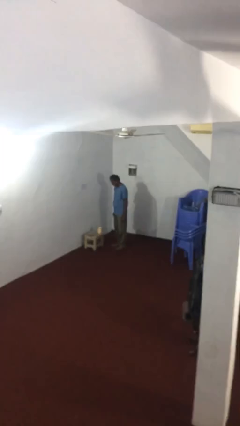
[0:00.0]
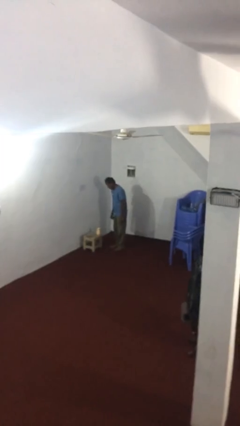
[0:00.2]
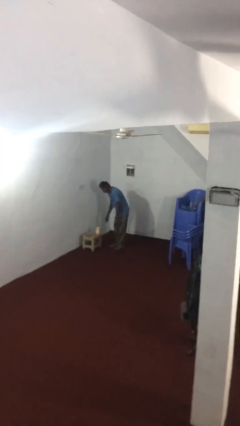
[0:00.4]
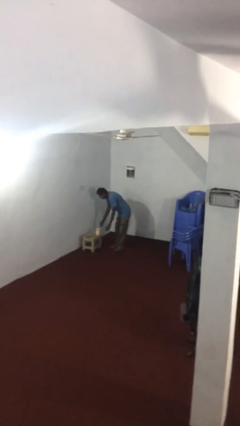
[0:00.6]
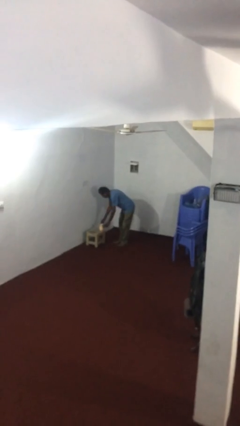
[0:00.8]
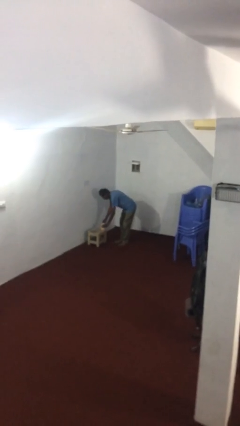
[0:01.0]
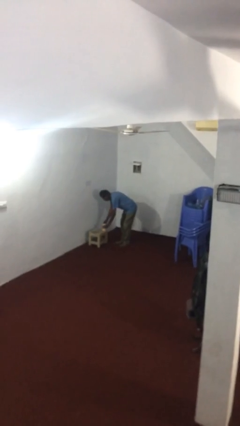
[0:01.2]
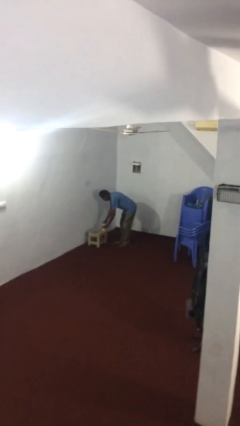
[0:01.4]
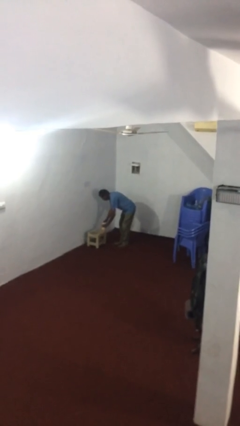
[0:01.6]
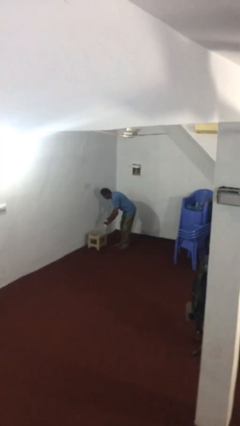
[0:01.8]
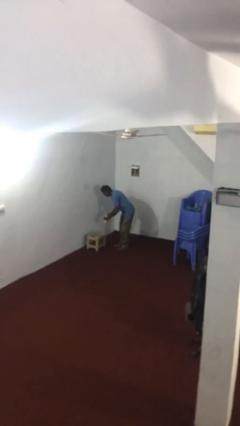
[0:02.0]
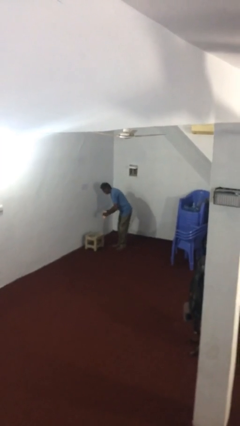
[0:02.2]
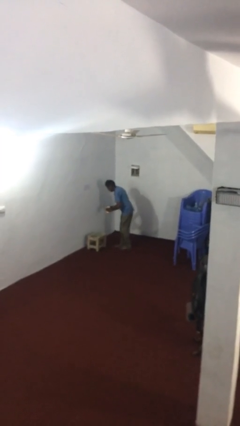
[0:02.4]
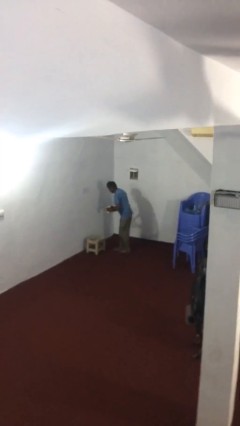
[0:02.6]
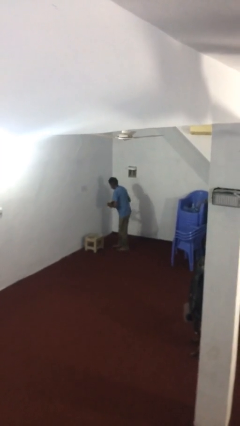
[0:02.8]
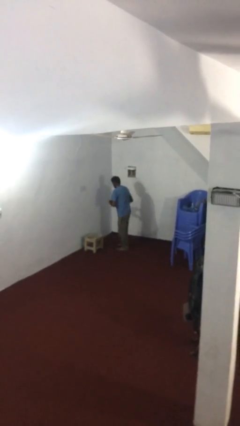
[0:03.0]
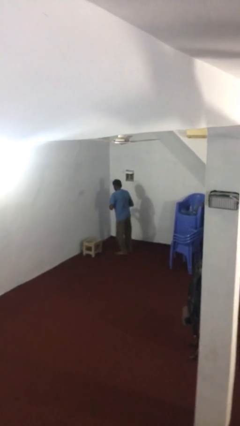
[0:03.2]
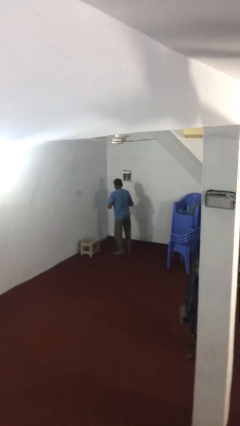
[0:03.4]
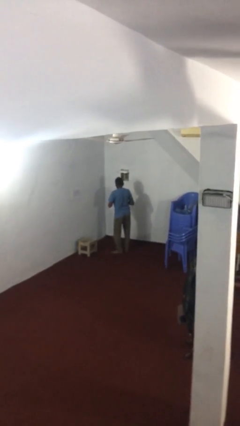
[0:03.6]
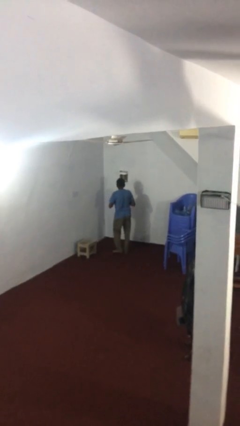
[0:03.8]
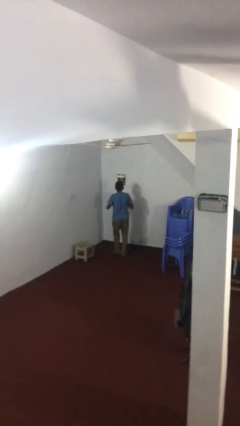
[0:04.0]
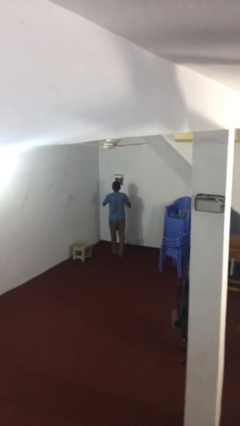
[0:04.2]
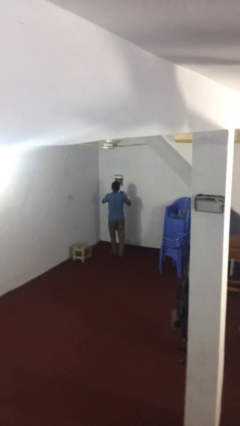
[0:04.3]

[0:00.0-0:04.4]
person picks up object from table

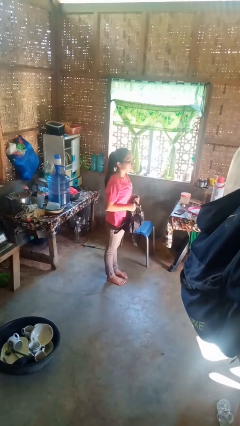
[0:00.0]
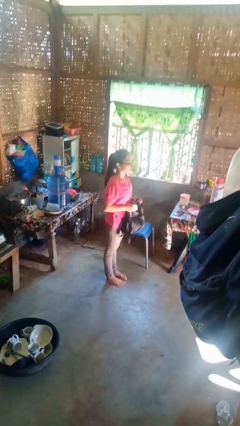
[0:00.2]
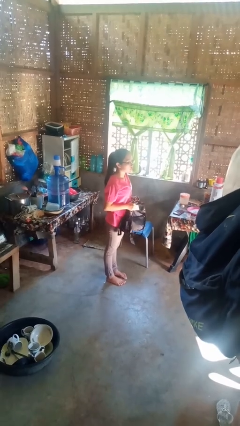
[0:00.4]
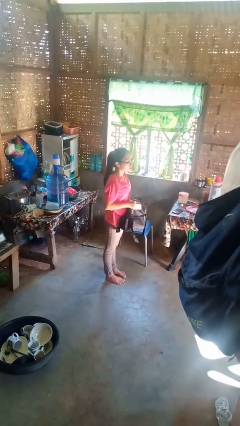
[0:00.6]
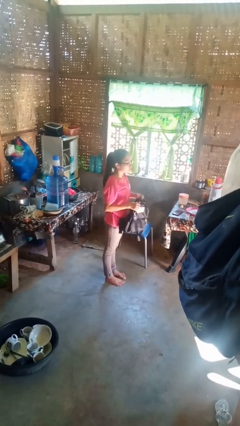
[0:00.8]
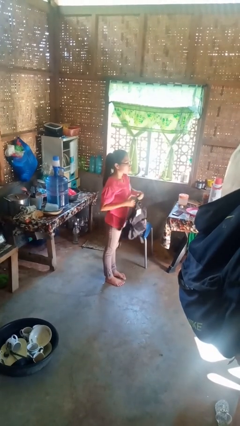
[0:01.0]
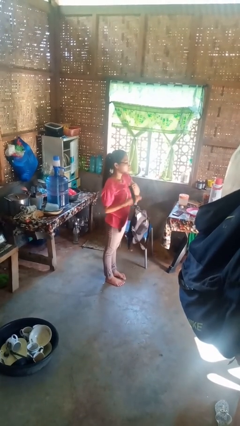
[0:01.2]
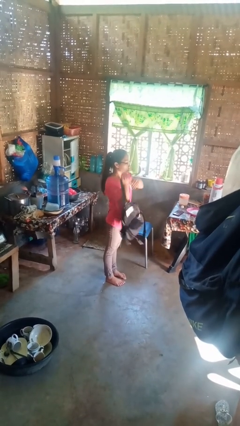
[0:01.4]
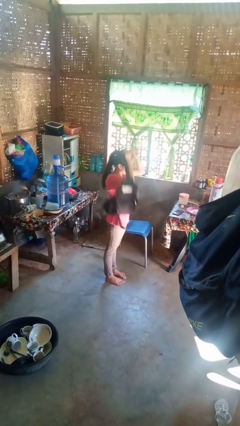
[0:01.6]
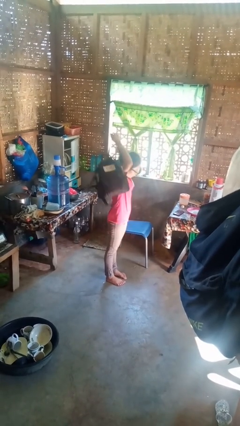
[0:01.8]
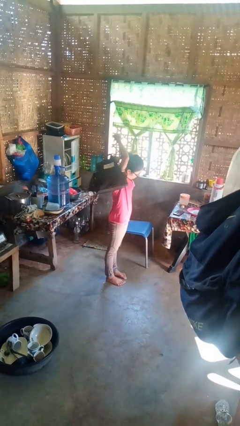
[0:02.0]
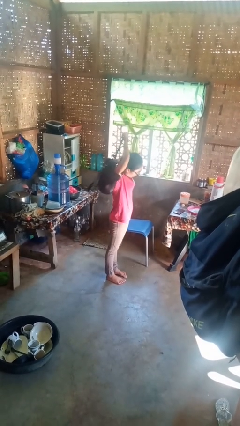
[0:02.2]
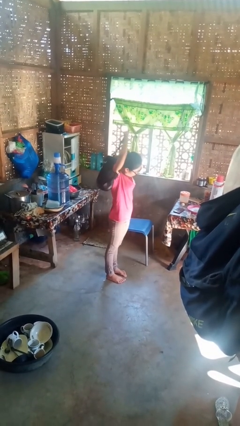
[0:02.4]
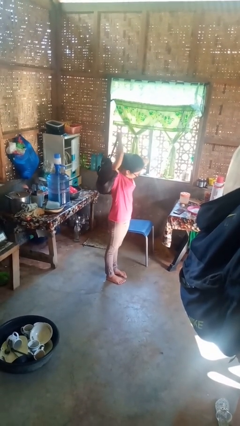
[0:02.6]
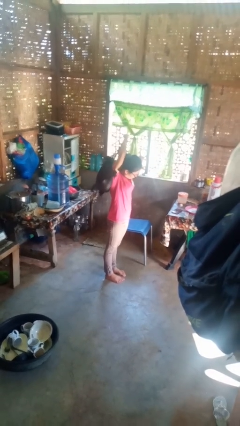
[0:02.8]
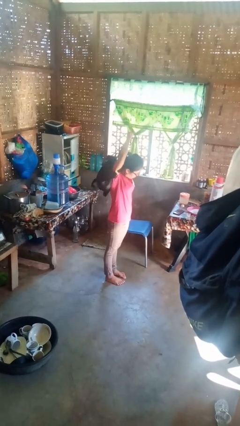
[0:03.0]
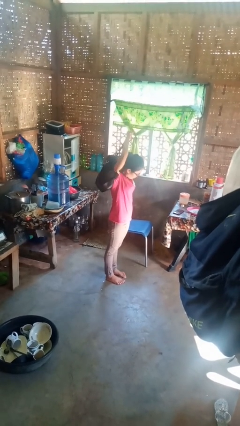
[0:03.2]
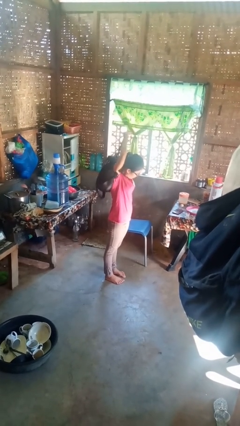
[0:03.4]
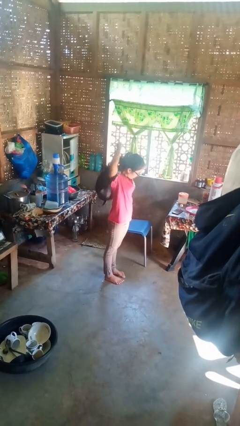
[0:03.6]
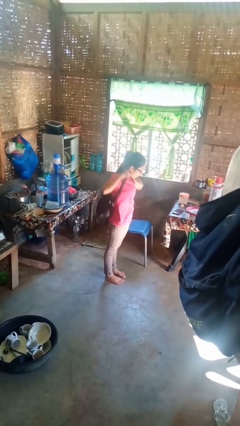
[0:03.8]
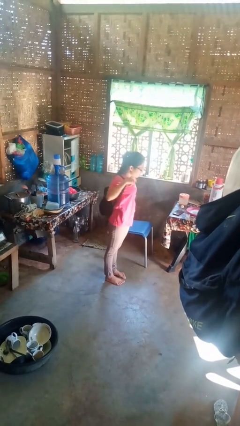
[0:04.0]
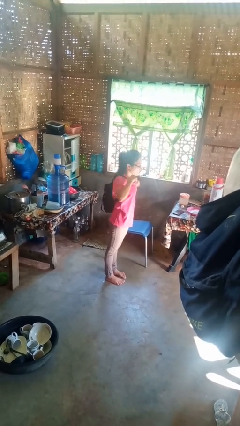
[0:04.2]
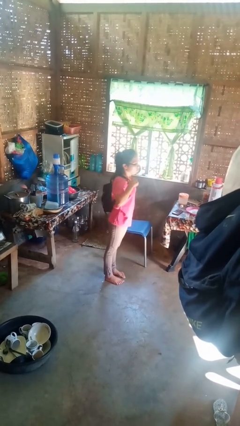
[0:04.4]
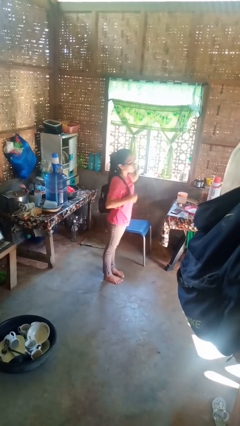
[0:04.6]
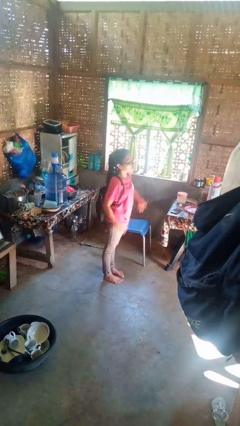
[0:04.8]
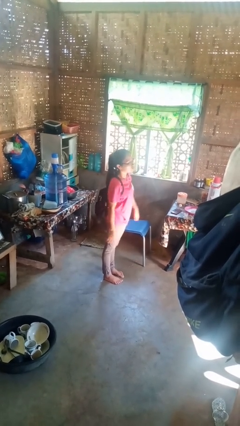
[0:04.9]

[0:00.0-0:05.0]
person puts on backpack

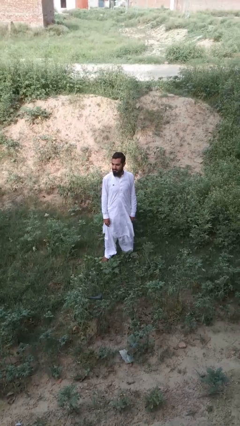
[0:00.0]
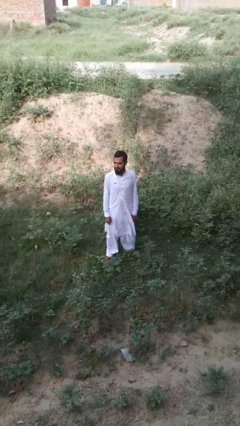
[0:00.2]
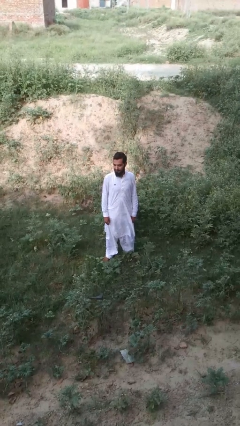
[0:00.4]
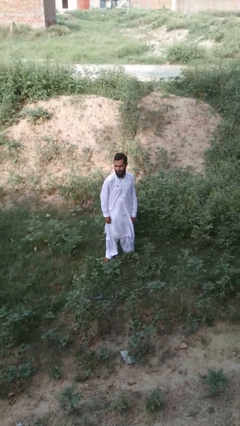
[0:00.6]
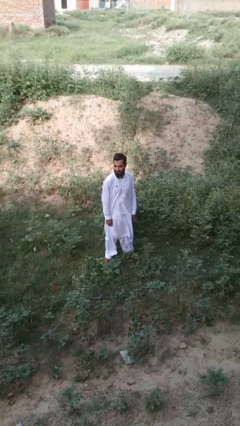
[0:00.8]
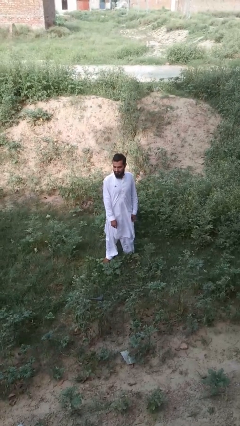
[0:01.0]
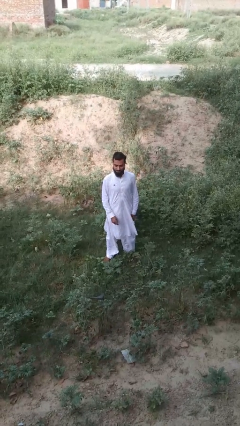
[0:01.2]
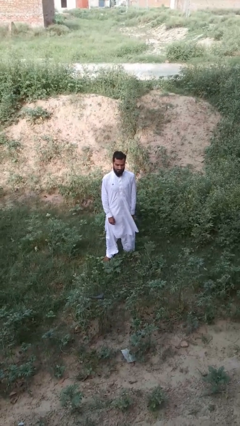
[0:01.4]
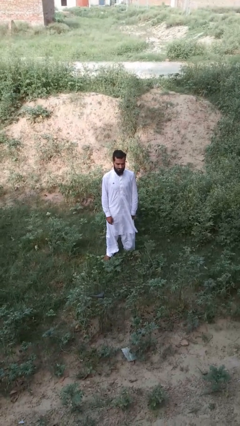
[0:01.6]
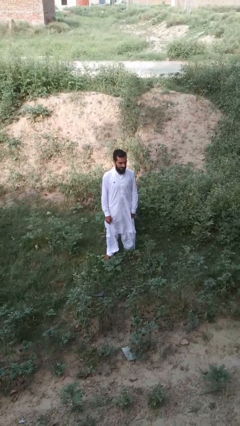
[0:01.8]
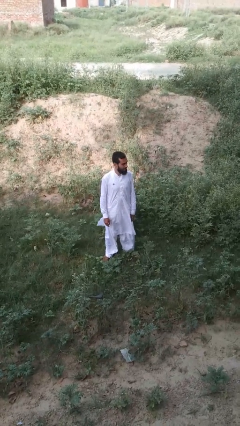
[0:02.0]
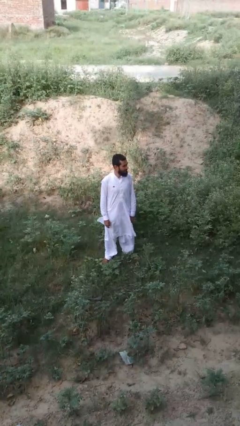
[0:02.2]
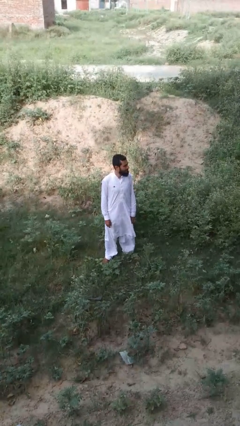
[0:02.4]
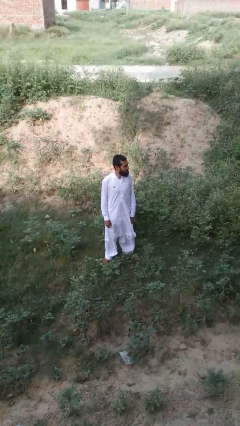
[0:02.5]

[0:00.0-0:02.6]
person shrugs

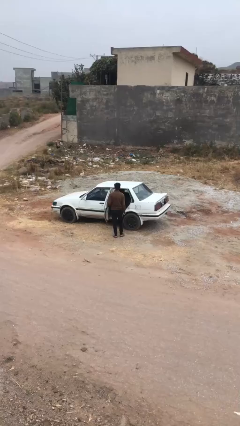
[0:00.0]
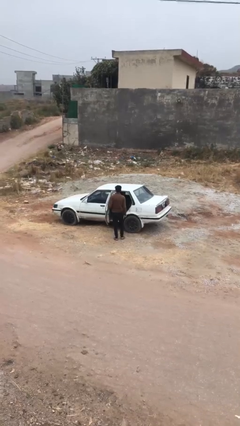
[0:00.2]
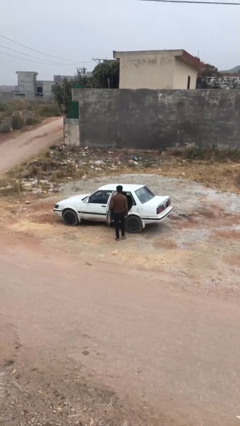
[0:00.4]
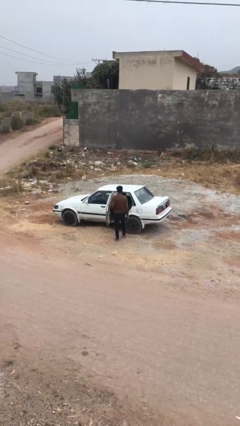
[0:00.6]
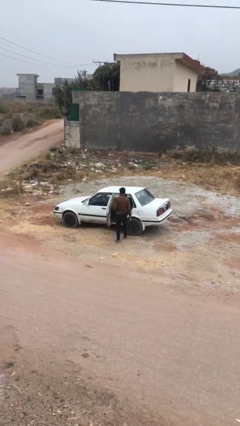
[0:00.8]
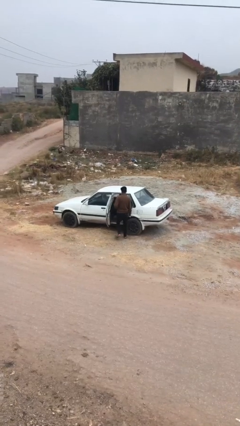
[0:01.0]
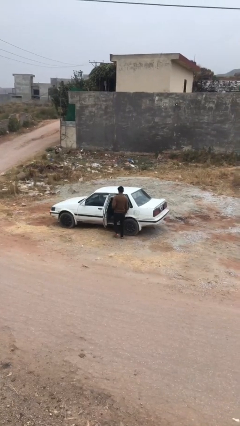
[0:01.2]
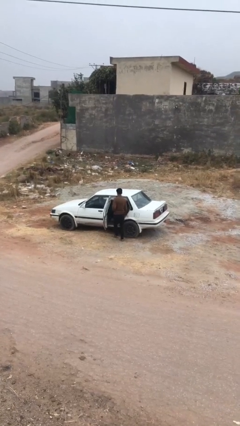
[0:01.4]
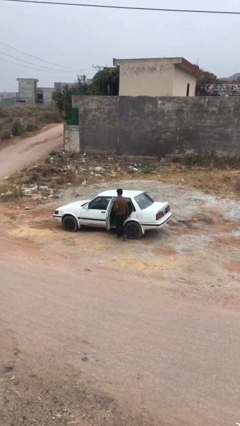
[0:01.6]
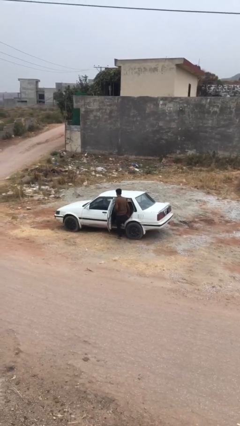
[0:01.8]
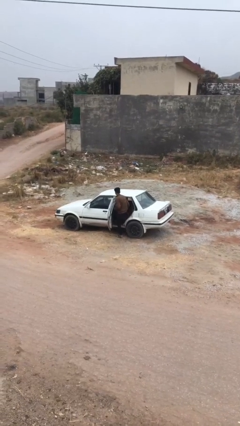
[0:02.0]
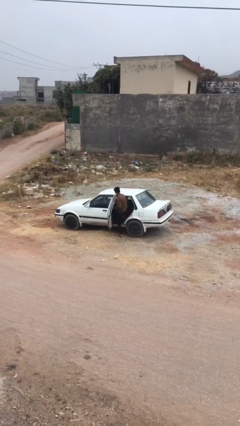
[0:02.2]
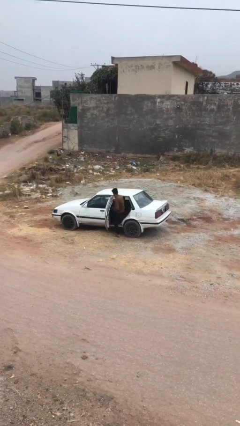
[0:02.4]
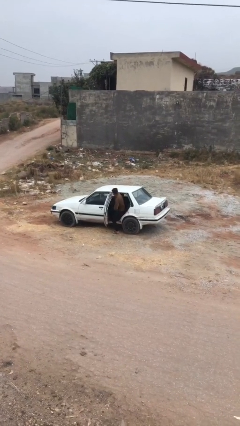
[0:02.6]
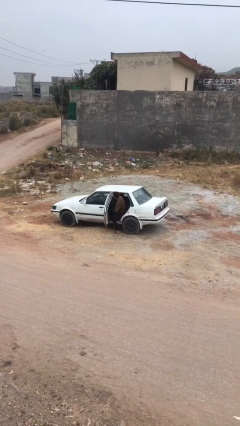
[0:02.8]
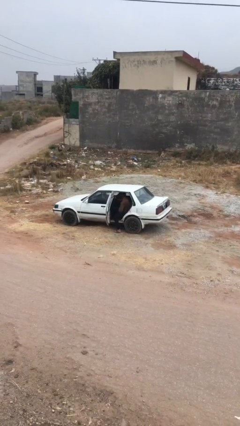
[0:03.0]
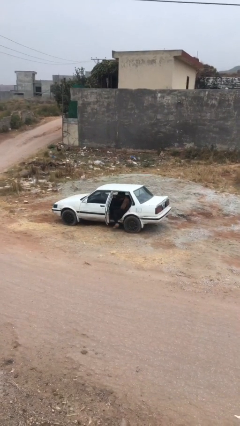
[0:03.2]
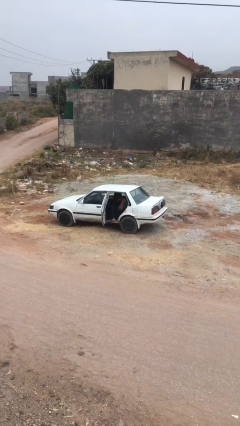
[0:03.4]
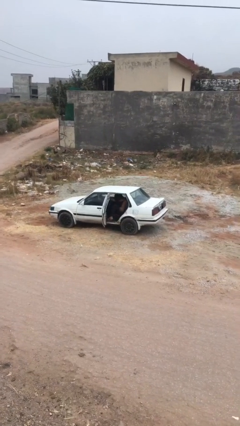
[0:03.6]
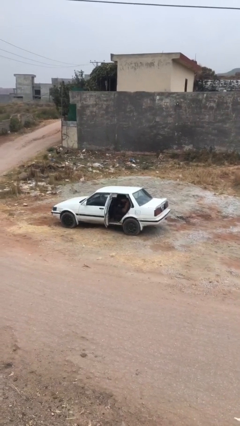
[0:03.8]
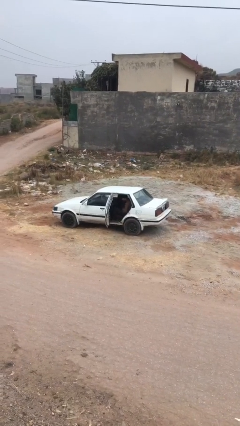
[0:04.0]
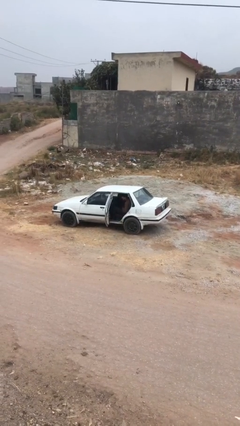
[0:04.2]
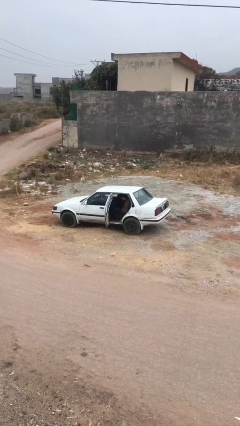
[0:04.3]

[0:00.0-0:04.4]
person enters car

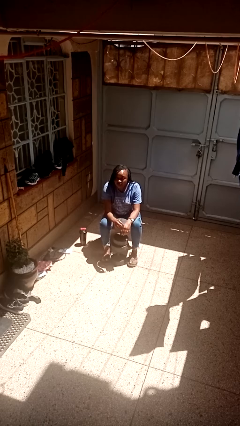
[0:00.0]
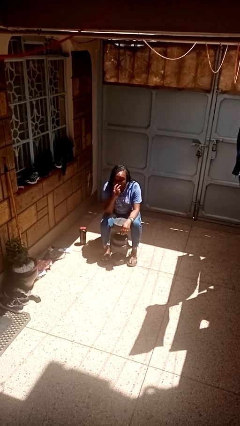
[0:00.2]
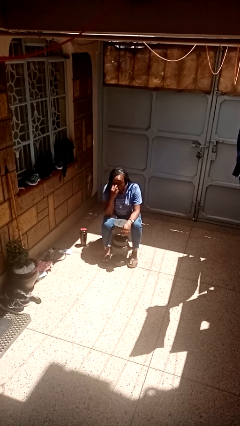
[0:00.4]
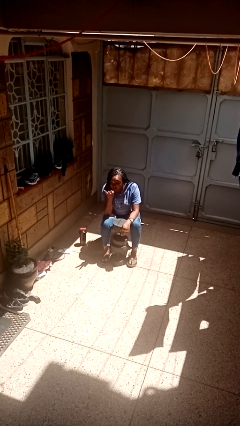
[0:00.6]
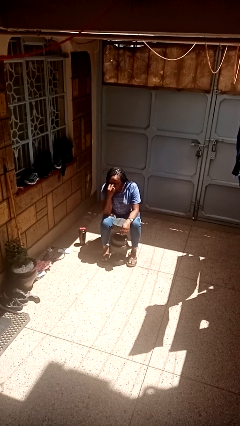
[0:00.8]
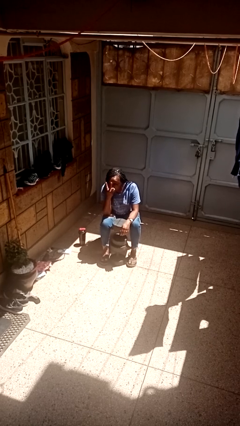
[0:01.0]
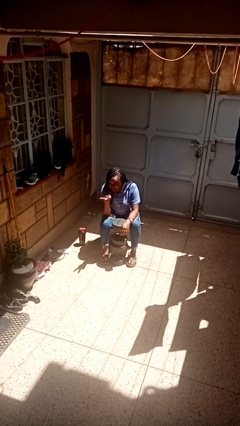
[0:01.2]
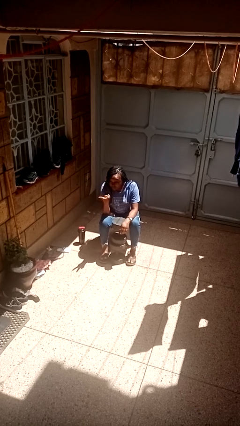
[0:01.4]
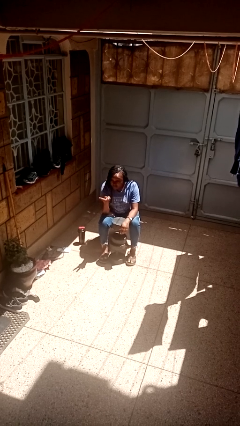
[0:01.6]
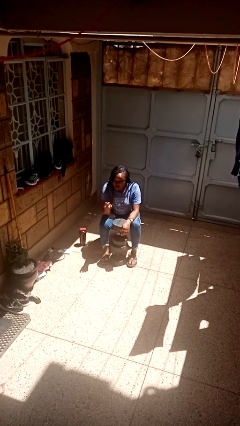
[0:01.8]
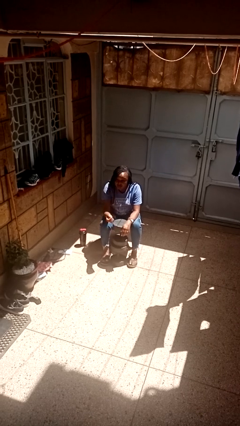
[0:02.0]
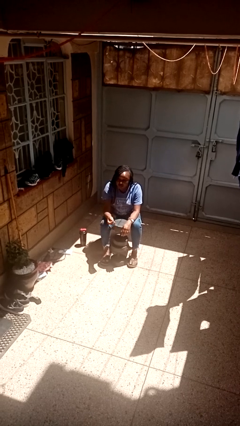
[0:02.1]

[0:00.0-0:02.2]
person gestures watch closely
